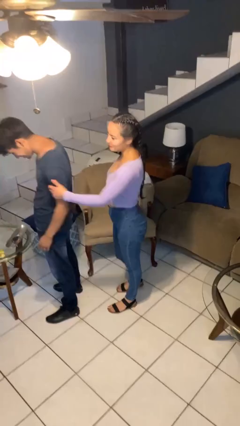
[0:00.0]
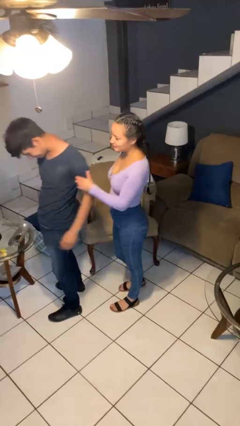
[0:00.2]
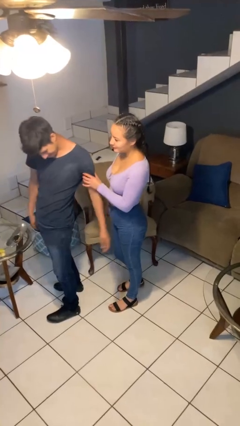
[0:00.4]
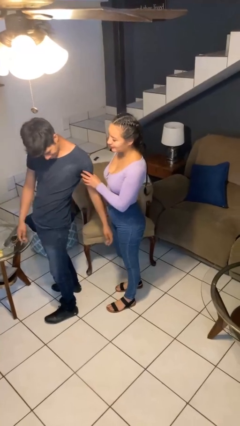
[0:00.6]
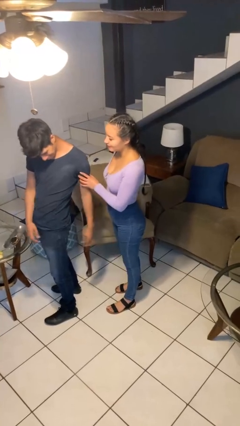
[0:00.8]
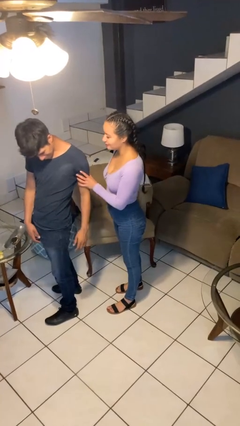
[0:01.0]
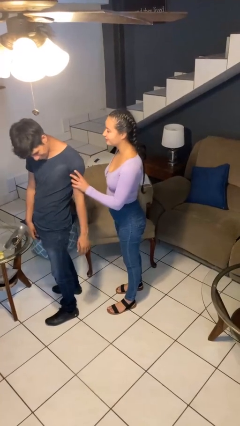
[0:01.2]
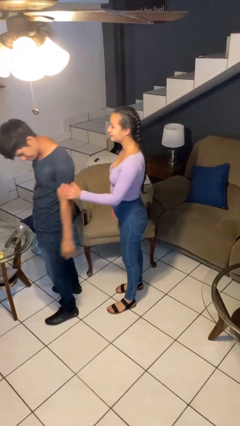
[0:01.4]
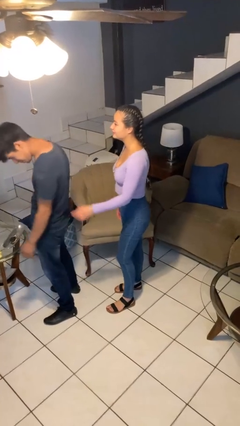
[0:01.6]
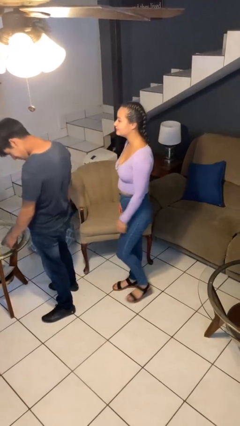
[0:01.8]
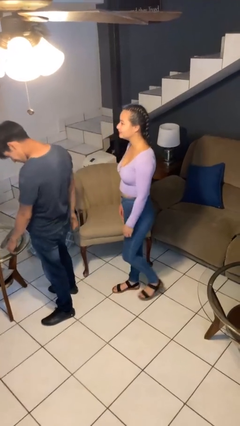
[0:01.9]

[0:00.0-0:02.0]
person grabs person by bicep

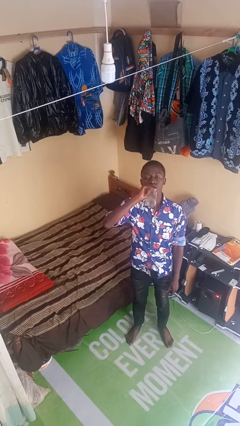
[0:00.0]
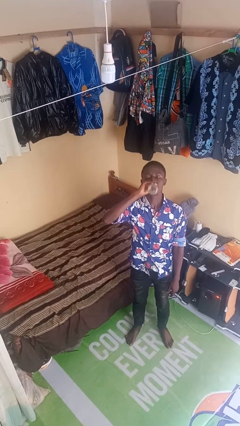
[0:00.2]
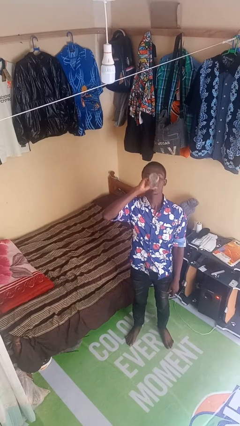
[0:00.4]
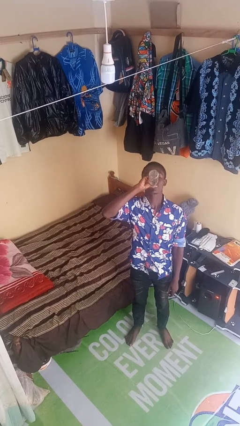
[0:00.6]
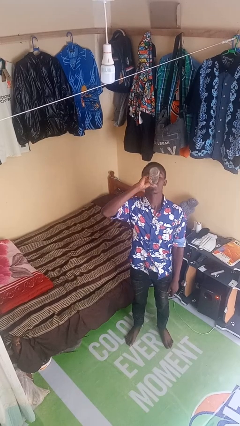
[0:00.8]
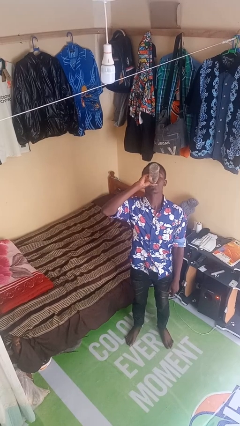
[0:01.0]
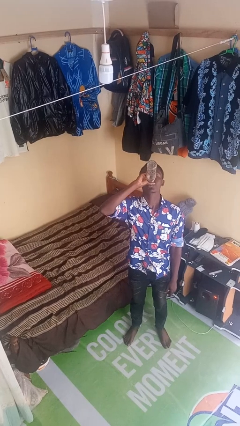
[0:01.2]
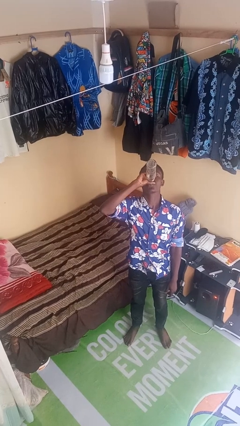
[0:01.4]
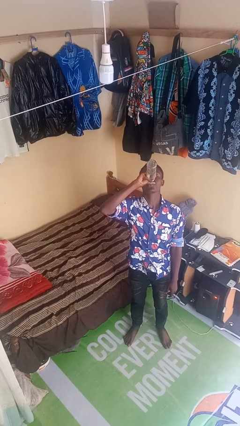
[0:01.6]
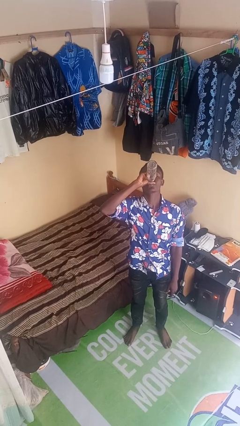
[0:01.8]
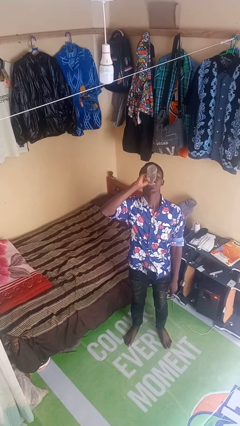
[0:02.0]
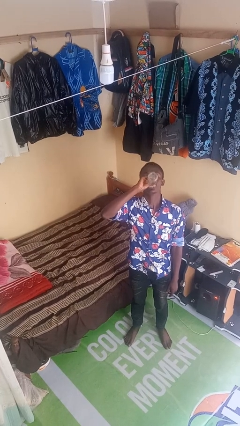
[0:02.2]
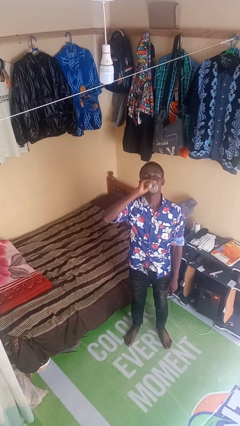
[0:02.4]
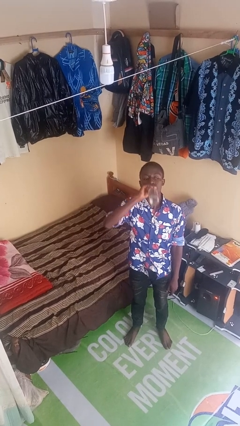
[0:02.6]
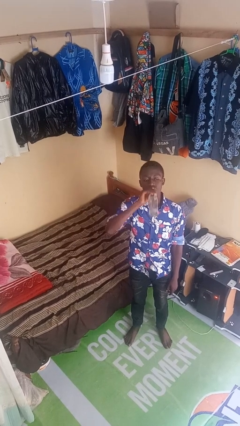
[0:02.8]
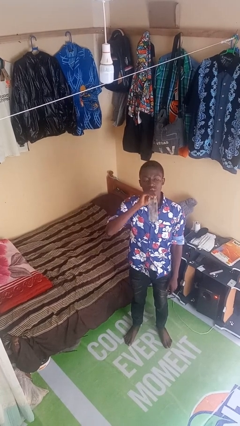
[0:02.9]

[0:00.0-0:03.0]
person drinks from bottle

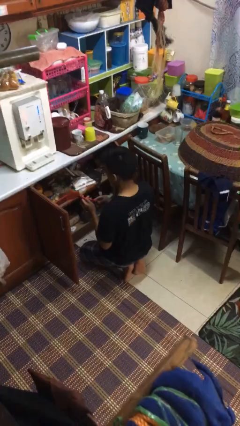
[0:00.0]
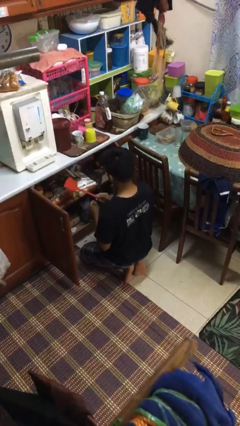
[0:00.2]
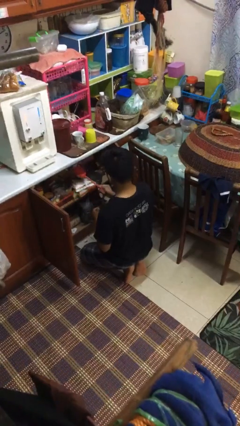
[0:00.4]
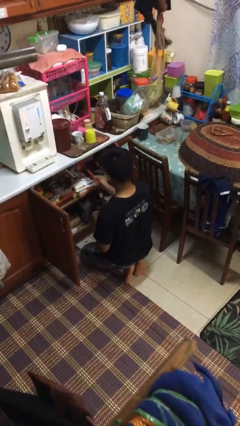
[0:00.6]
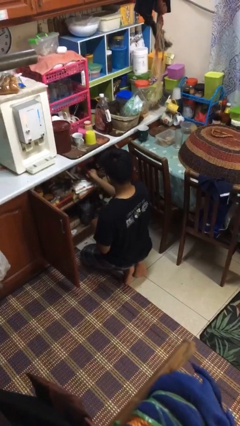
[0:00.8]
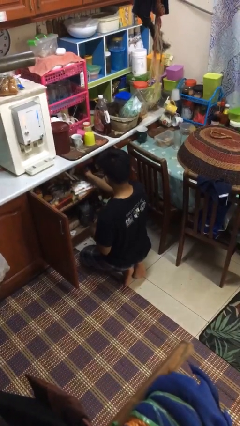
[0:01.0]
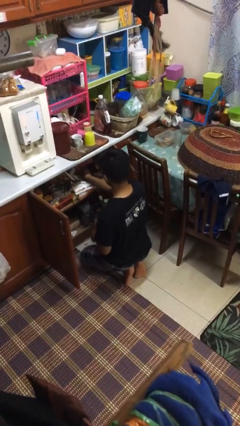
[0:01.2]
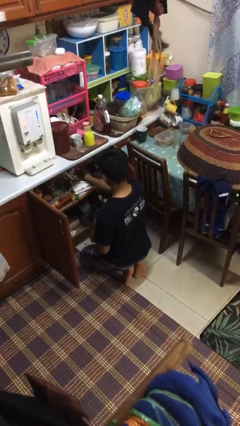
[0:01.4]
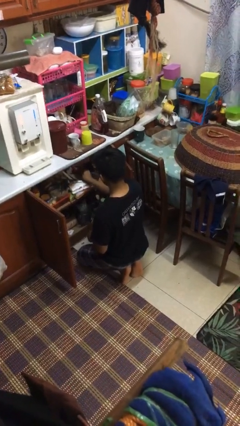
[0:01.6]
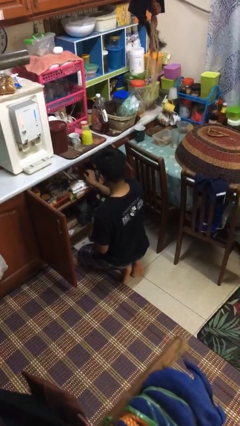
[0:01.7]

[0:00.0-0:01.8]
person puts object into kitchen drawer

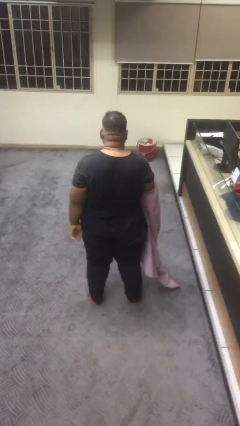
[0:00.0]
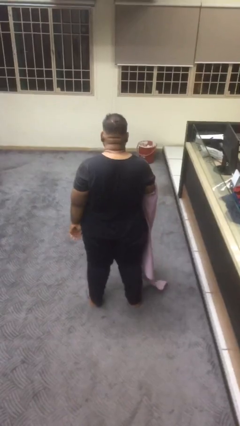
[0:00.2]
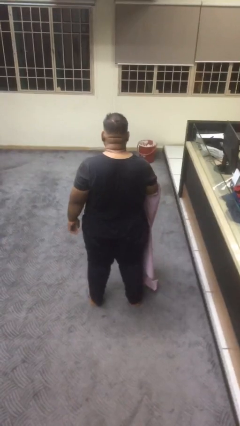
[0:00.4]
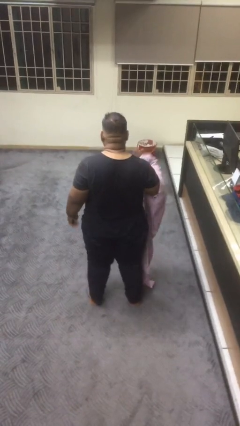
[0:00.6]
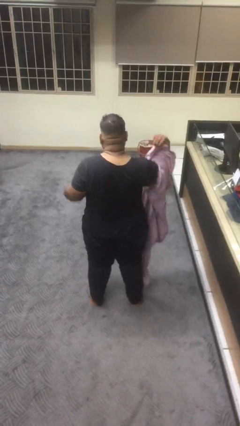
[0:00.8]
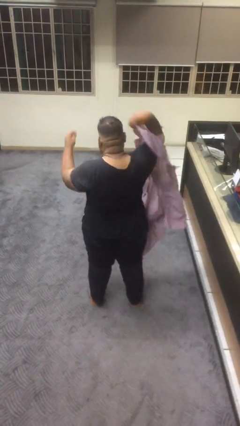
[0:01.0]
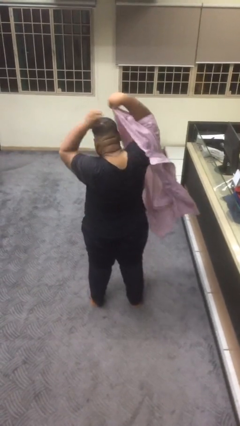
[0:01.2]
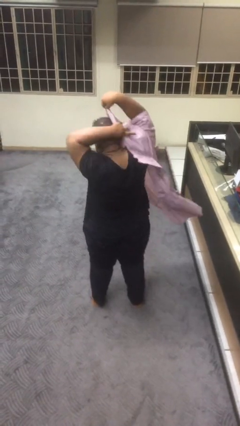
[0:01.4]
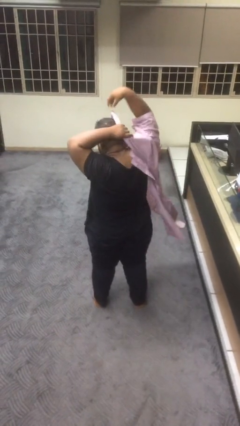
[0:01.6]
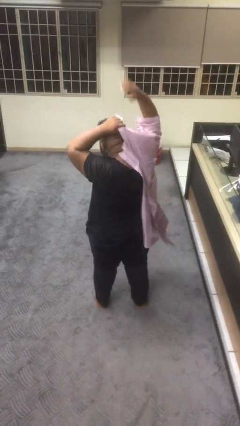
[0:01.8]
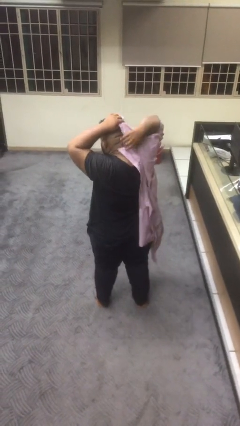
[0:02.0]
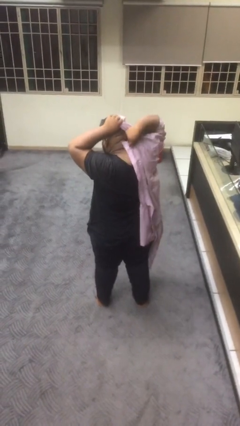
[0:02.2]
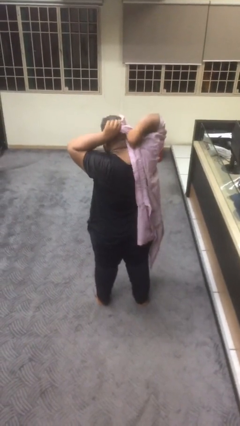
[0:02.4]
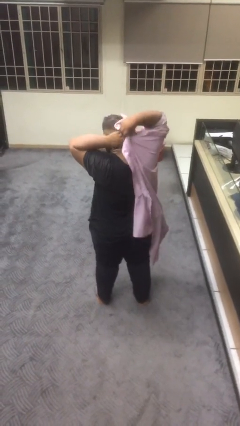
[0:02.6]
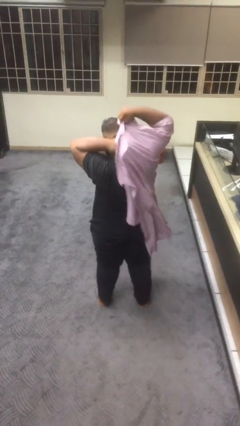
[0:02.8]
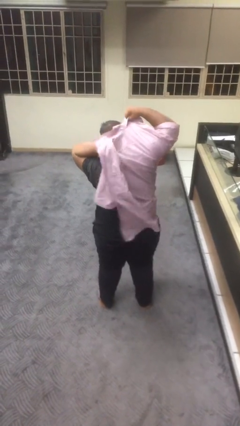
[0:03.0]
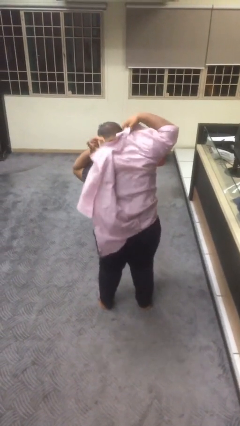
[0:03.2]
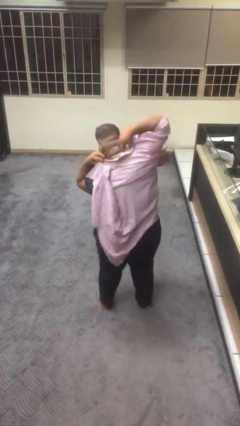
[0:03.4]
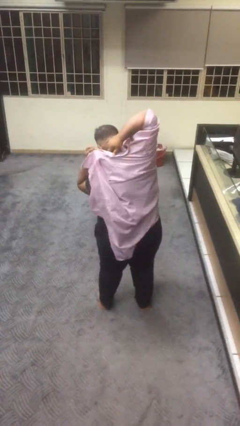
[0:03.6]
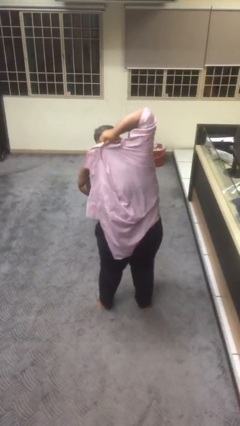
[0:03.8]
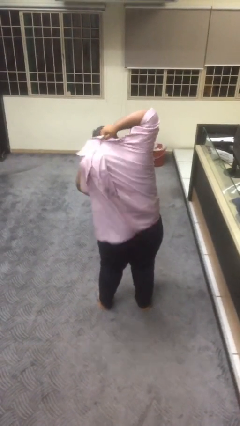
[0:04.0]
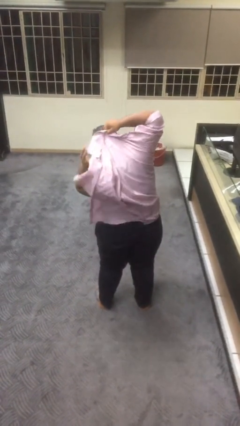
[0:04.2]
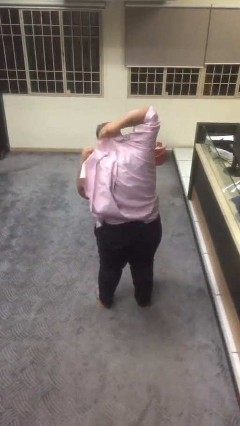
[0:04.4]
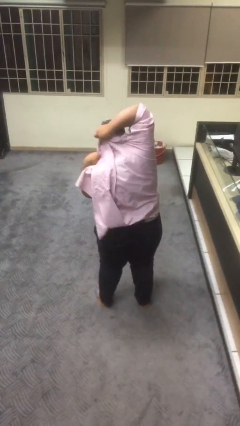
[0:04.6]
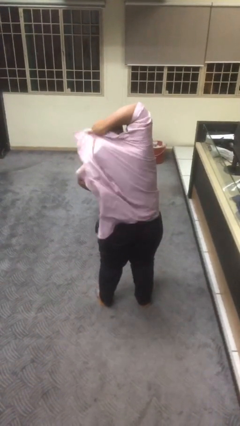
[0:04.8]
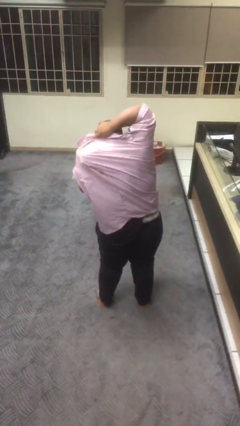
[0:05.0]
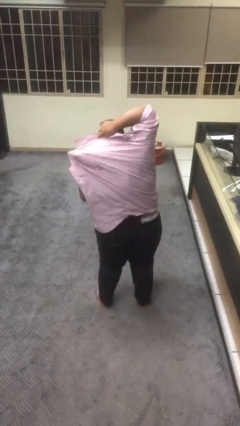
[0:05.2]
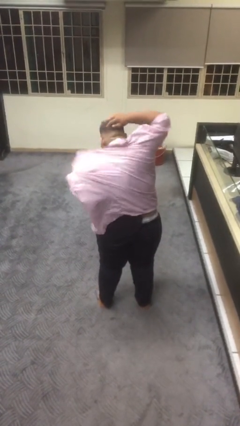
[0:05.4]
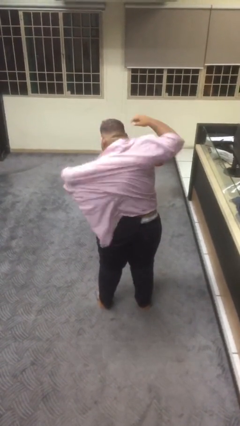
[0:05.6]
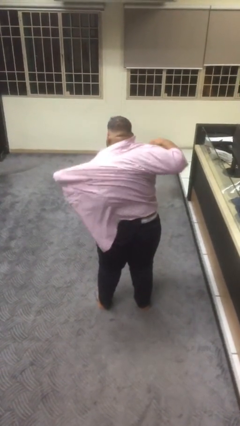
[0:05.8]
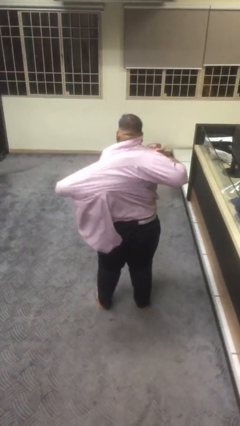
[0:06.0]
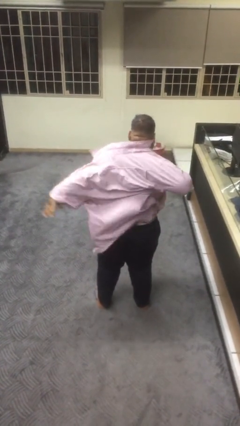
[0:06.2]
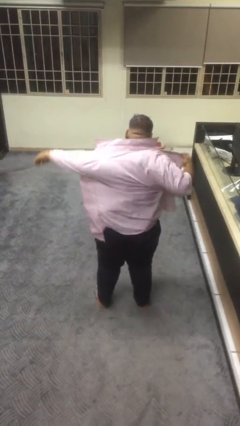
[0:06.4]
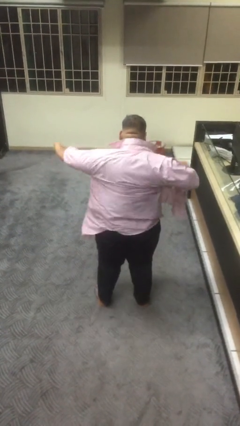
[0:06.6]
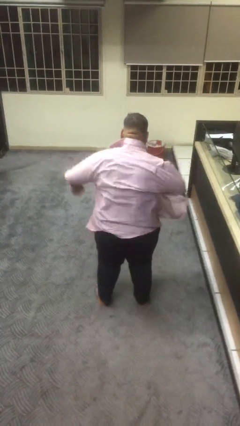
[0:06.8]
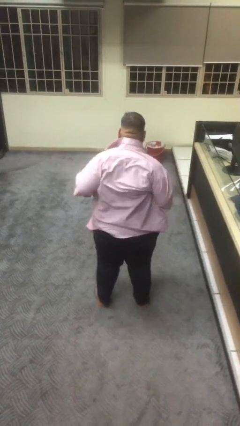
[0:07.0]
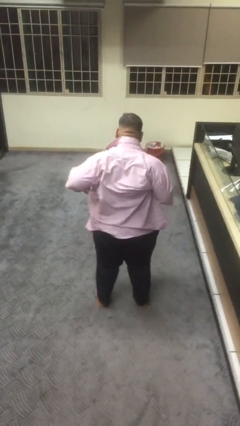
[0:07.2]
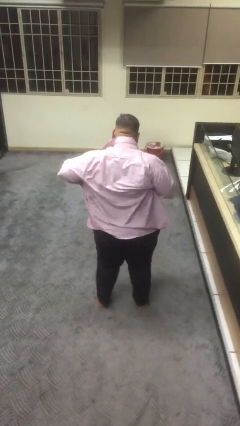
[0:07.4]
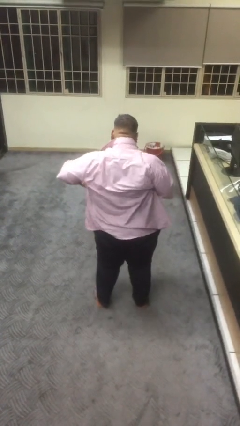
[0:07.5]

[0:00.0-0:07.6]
person puts on shirt

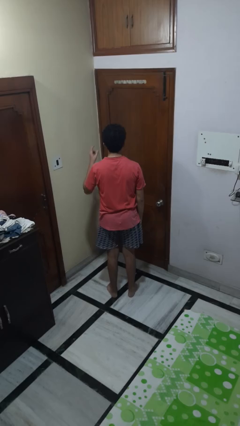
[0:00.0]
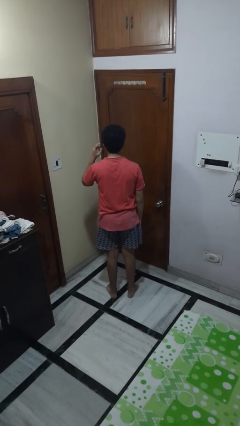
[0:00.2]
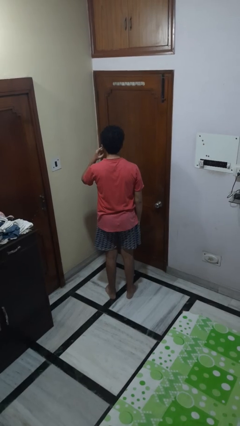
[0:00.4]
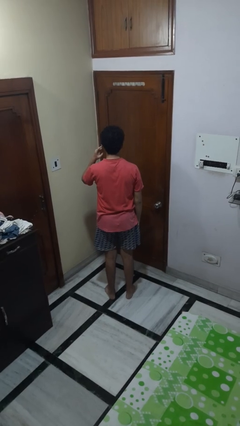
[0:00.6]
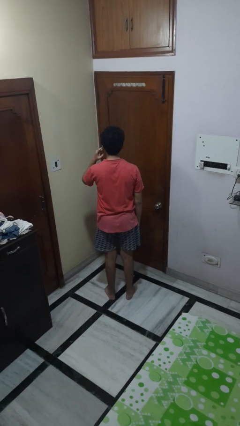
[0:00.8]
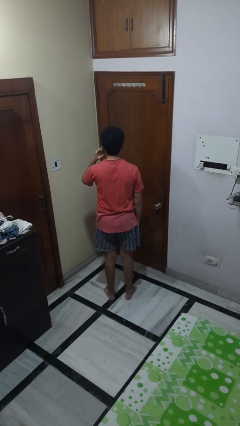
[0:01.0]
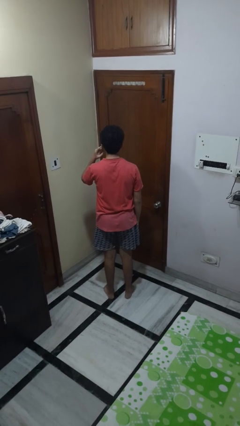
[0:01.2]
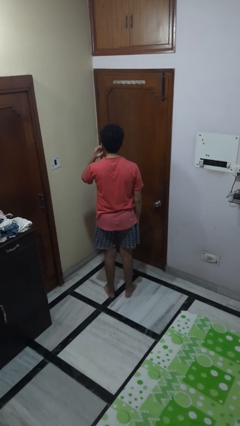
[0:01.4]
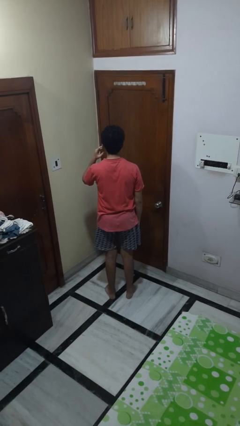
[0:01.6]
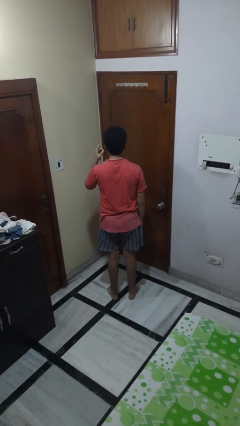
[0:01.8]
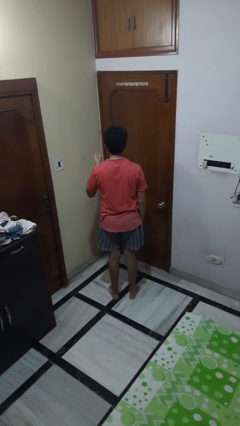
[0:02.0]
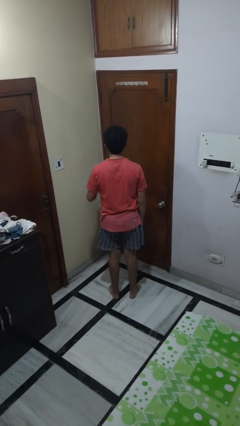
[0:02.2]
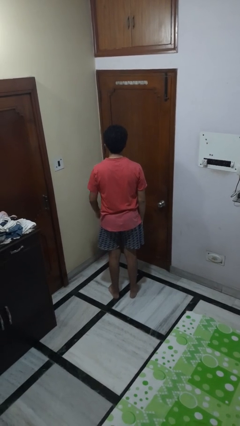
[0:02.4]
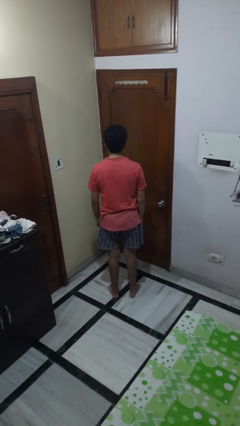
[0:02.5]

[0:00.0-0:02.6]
person gestures listen closely

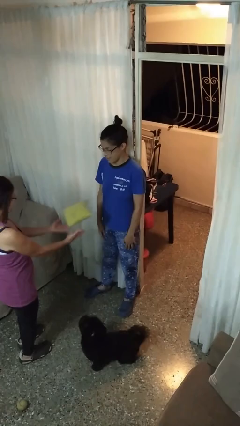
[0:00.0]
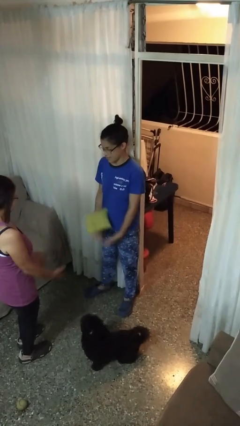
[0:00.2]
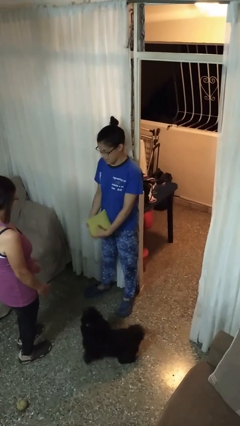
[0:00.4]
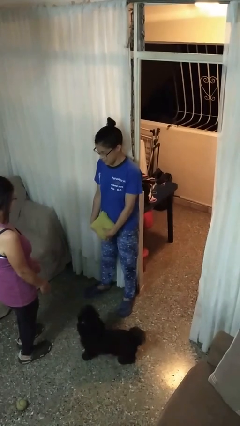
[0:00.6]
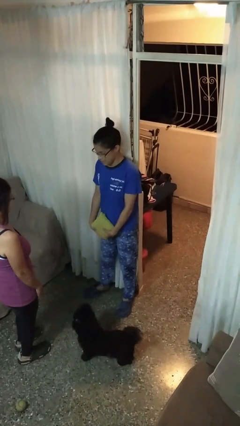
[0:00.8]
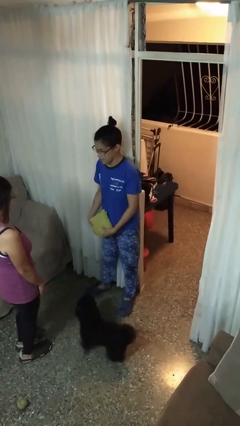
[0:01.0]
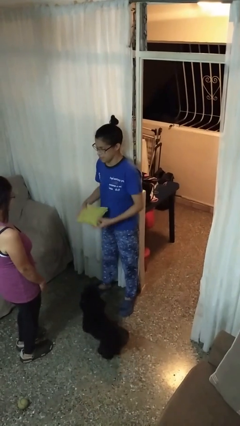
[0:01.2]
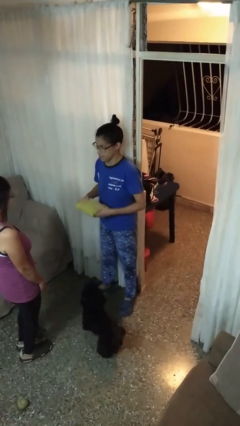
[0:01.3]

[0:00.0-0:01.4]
person catches object from person
